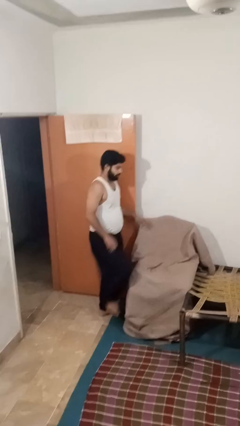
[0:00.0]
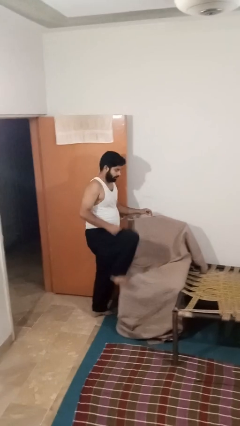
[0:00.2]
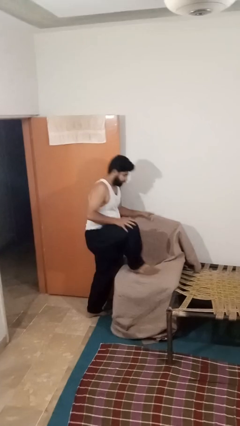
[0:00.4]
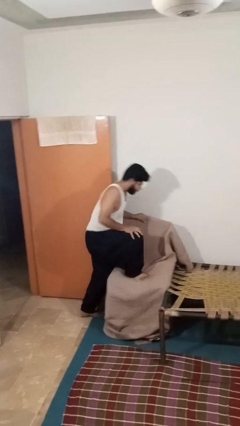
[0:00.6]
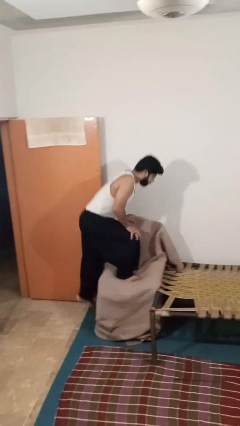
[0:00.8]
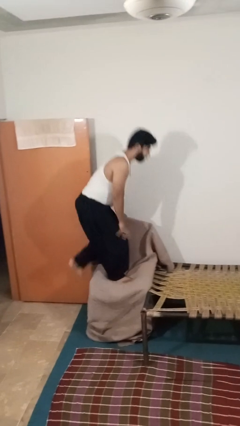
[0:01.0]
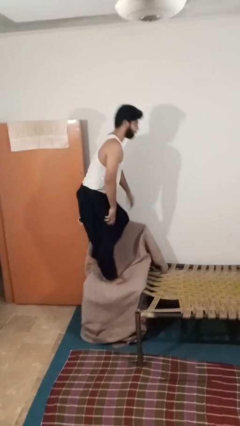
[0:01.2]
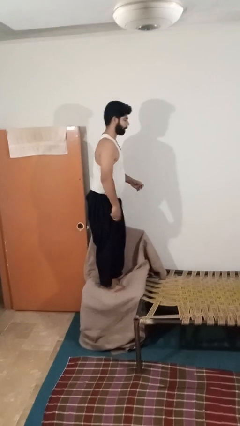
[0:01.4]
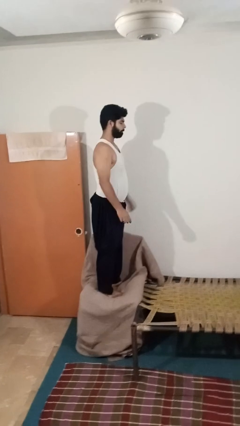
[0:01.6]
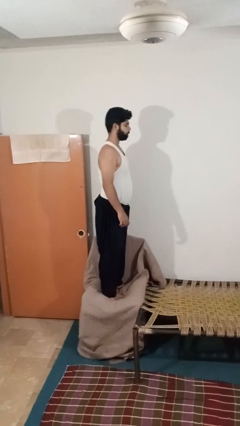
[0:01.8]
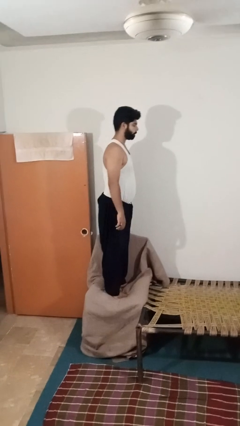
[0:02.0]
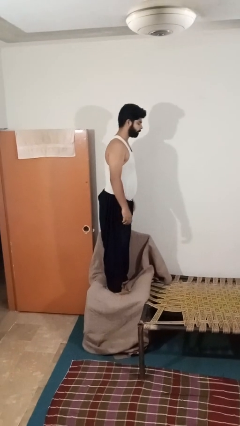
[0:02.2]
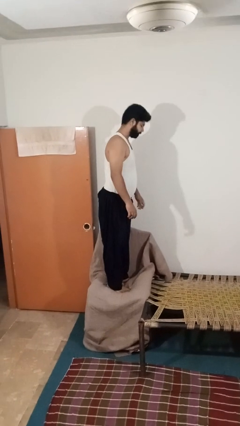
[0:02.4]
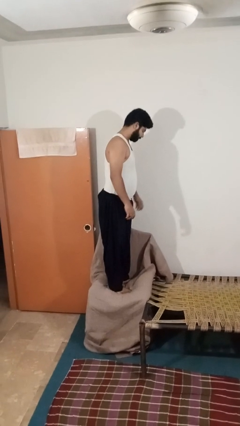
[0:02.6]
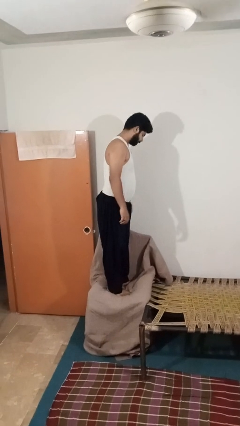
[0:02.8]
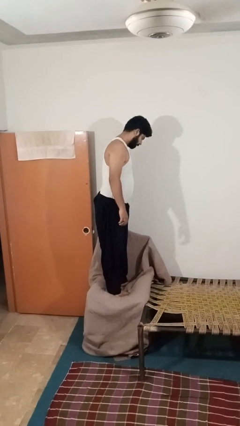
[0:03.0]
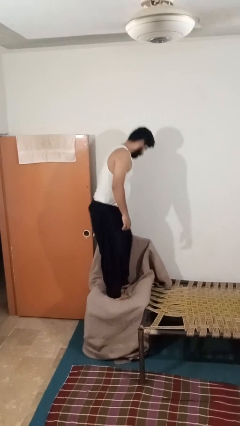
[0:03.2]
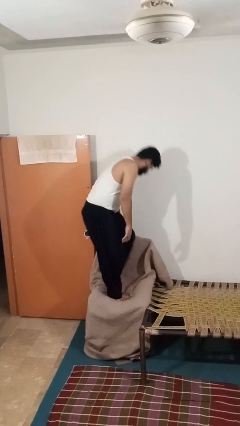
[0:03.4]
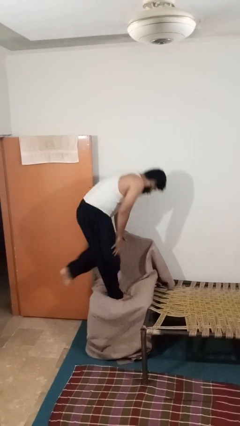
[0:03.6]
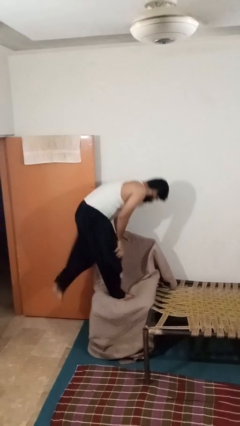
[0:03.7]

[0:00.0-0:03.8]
person climbs on couch

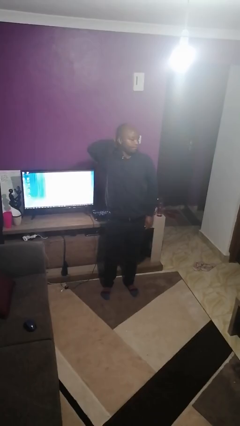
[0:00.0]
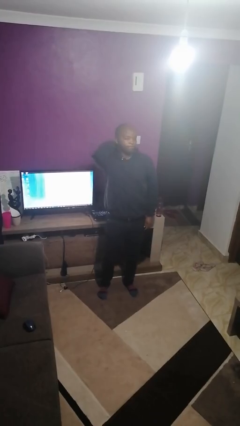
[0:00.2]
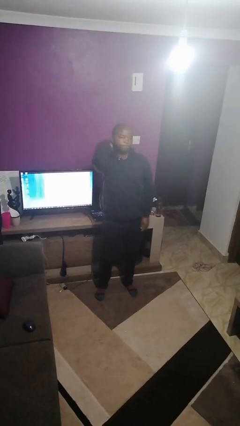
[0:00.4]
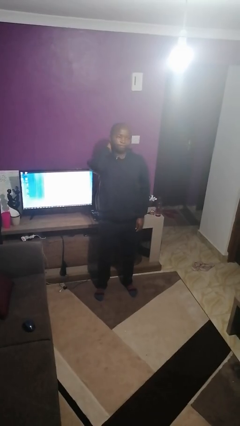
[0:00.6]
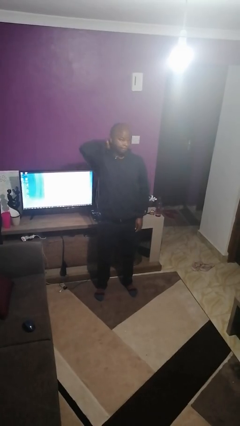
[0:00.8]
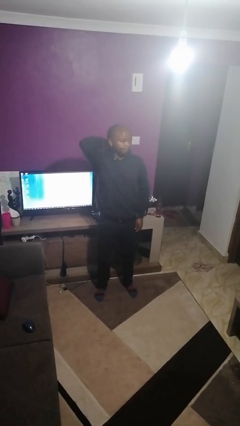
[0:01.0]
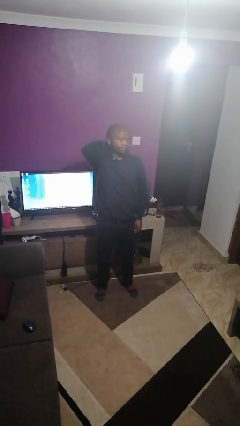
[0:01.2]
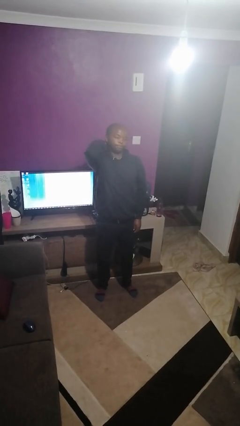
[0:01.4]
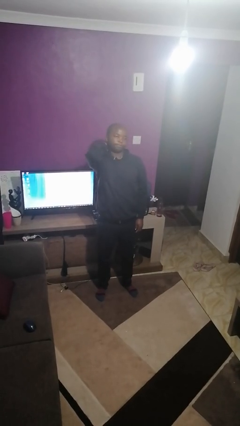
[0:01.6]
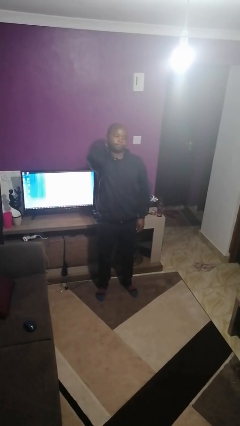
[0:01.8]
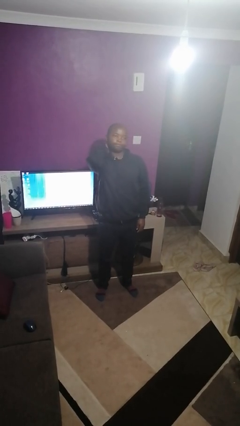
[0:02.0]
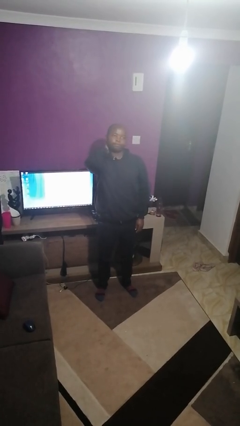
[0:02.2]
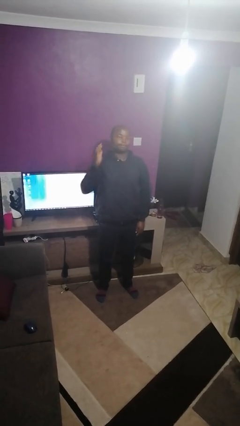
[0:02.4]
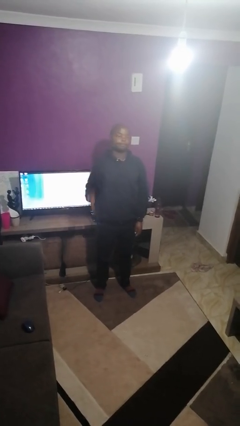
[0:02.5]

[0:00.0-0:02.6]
person rubs neck

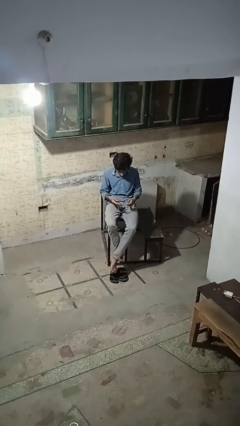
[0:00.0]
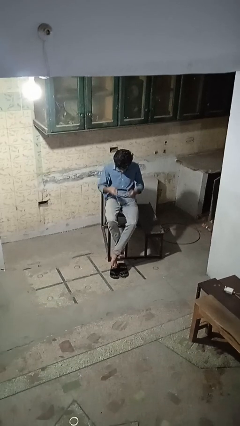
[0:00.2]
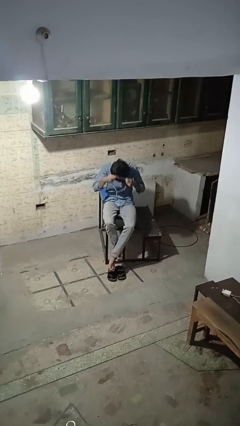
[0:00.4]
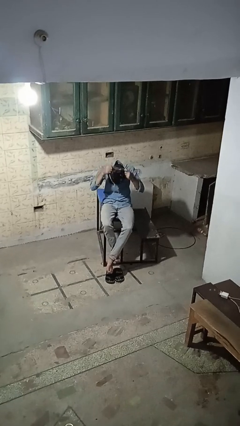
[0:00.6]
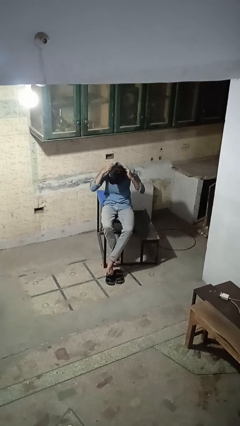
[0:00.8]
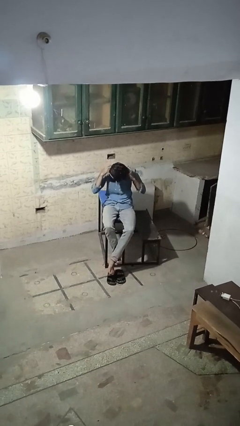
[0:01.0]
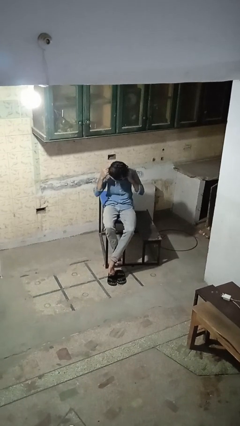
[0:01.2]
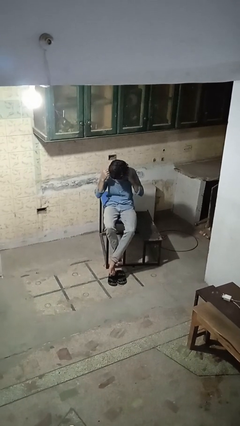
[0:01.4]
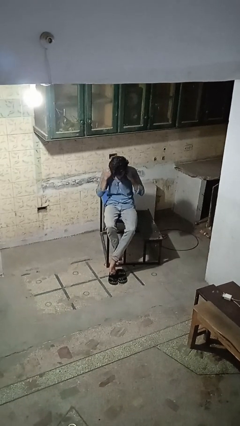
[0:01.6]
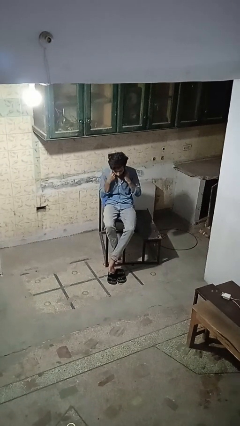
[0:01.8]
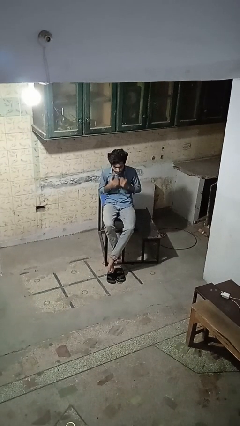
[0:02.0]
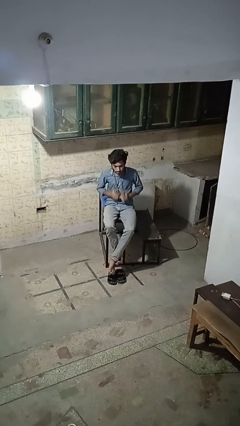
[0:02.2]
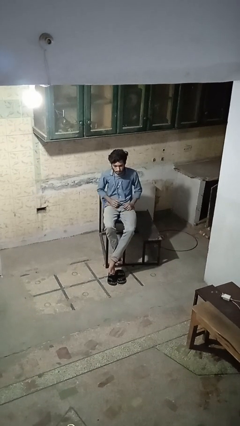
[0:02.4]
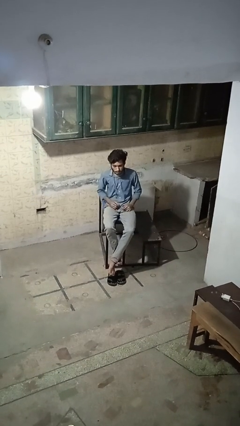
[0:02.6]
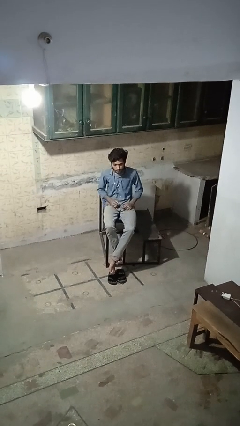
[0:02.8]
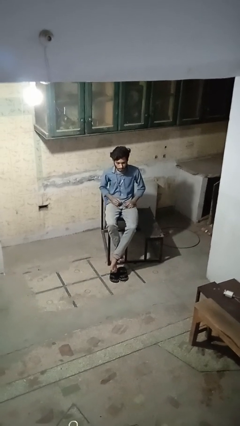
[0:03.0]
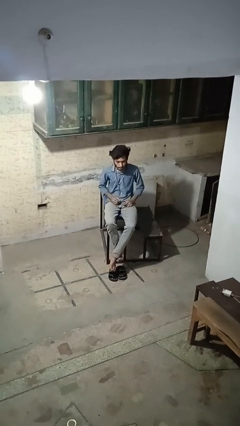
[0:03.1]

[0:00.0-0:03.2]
person puts on necklace

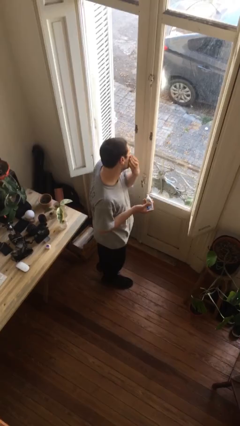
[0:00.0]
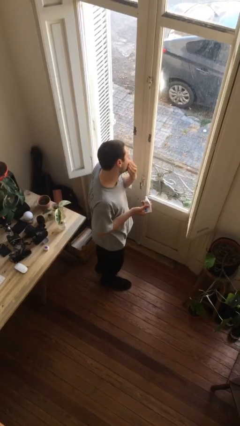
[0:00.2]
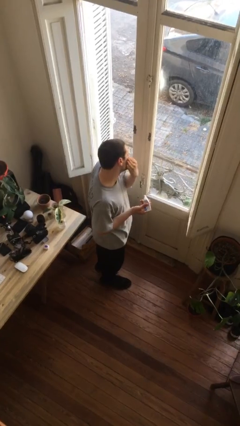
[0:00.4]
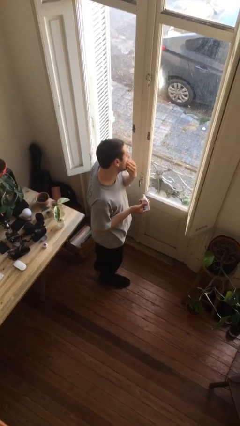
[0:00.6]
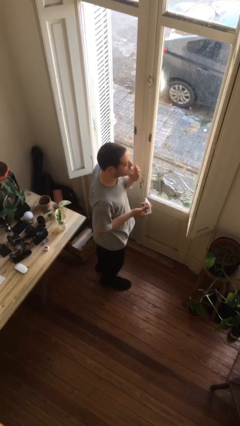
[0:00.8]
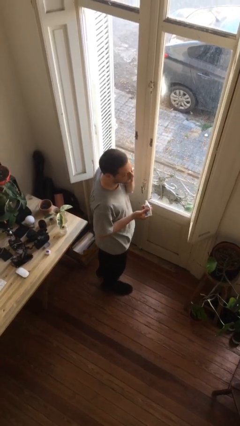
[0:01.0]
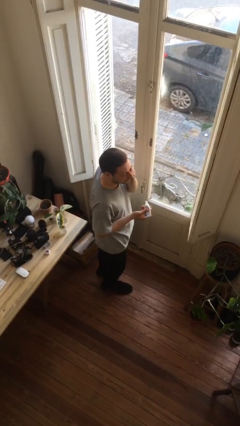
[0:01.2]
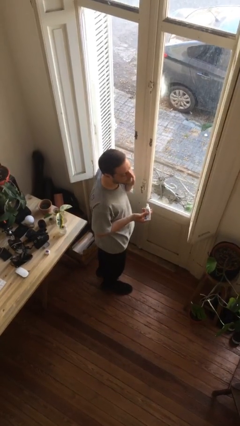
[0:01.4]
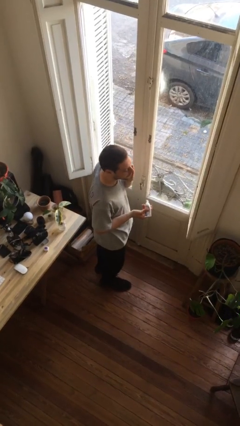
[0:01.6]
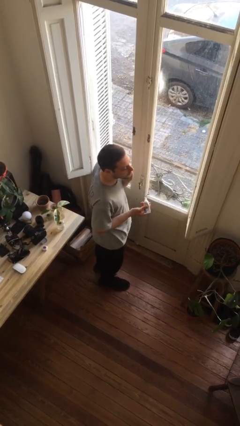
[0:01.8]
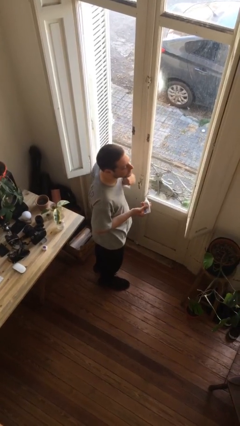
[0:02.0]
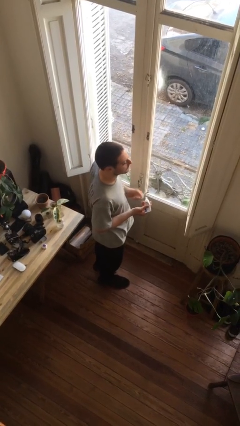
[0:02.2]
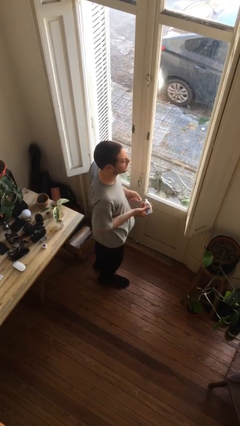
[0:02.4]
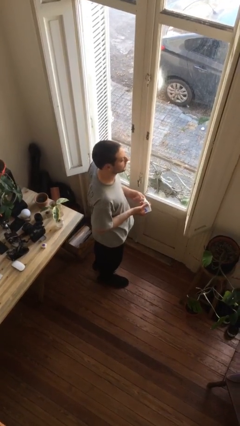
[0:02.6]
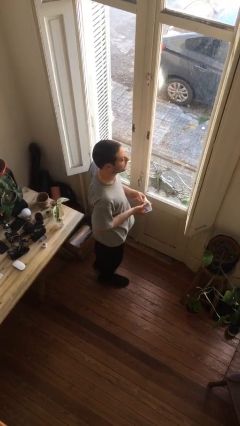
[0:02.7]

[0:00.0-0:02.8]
person applies facial moisturizer

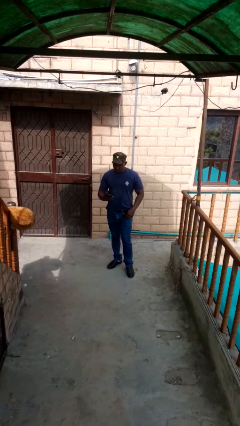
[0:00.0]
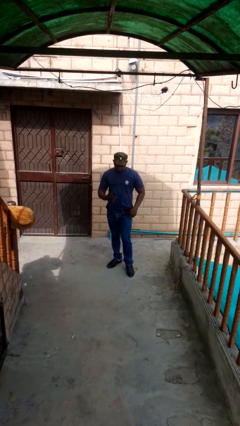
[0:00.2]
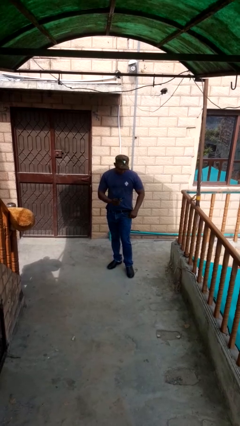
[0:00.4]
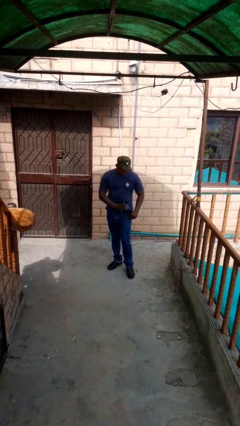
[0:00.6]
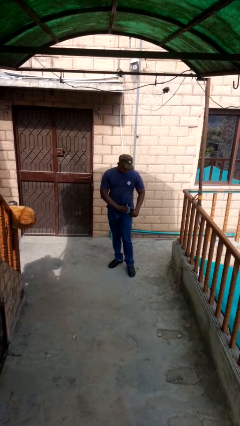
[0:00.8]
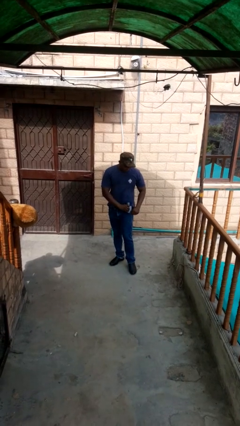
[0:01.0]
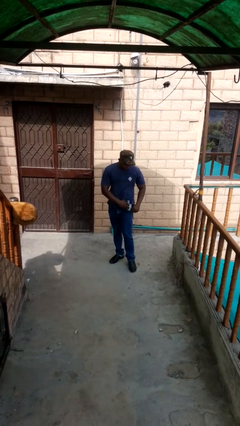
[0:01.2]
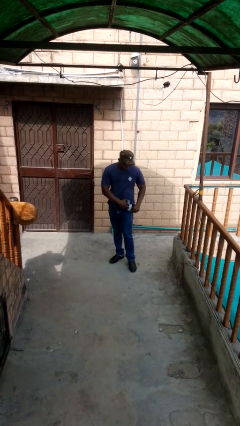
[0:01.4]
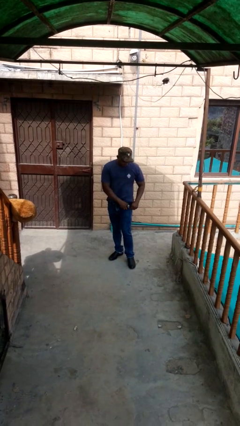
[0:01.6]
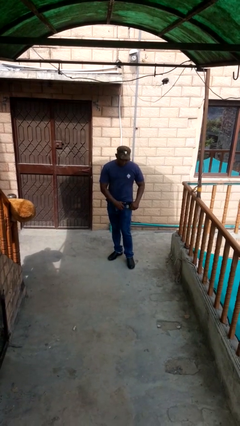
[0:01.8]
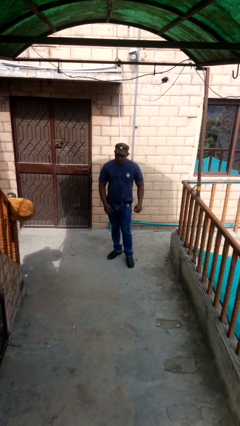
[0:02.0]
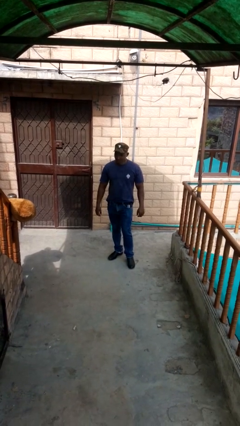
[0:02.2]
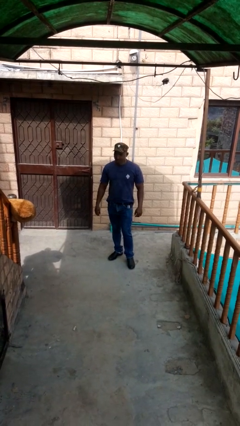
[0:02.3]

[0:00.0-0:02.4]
person puts phone into pocket

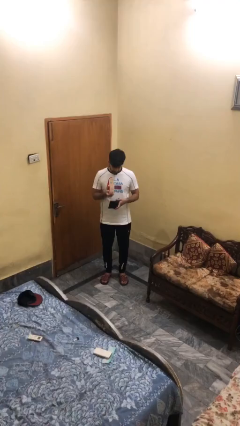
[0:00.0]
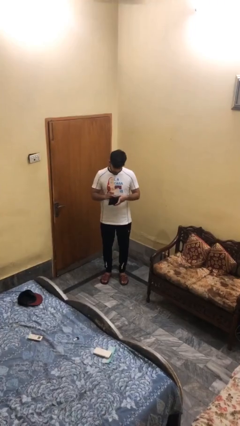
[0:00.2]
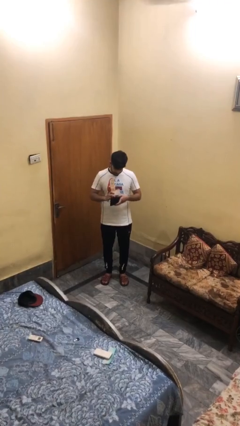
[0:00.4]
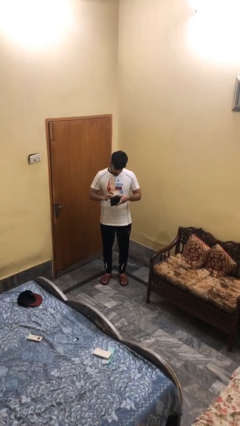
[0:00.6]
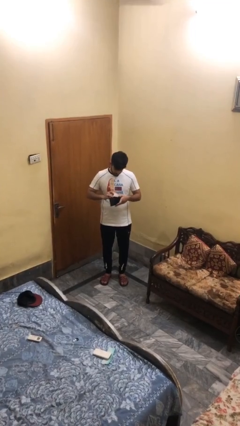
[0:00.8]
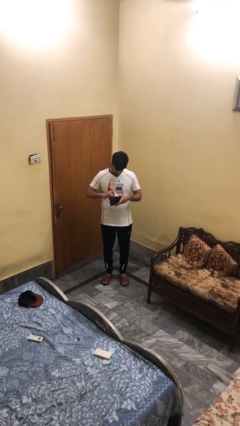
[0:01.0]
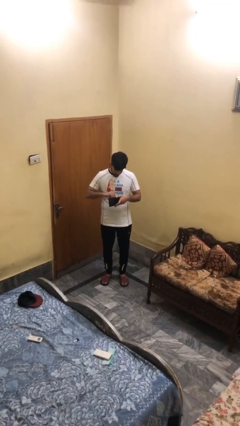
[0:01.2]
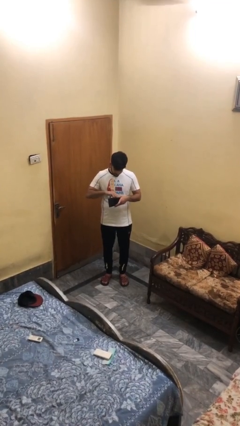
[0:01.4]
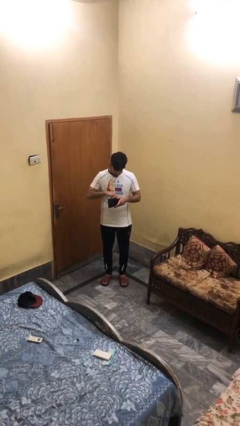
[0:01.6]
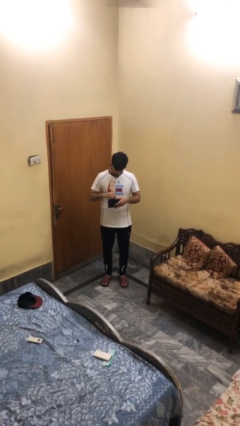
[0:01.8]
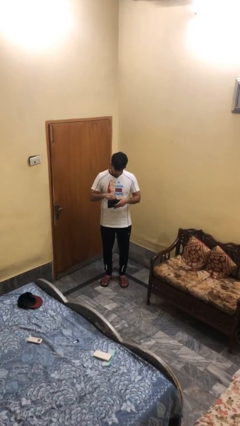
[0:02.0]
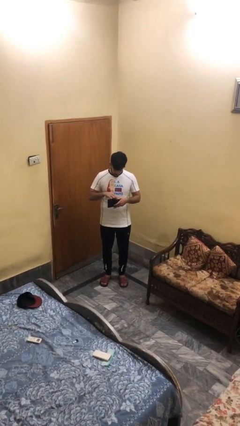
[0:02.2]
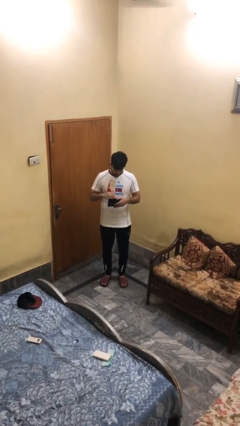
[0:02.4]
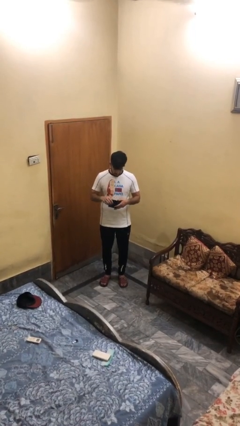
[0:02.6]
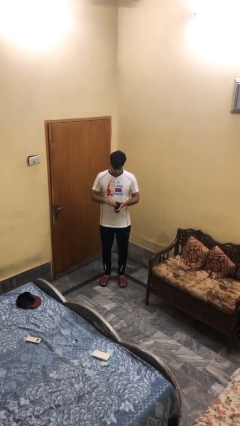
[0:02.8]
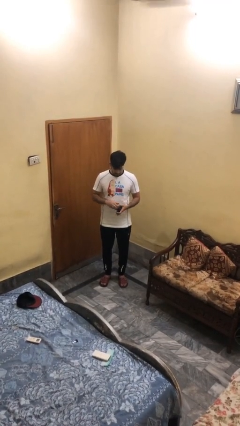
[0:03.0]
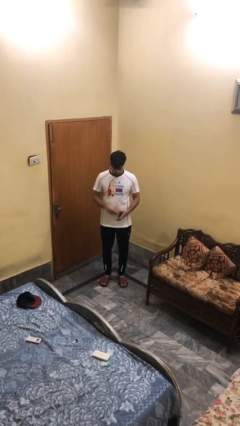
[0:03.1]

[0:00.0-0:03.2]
person puts object into purse

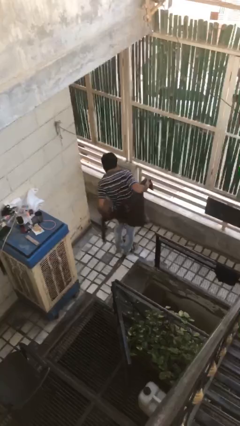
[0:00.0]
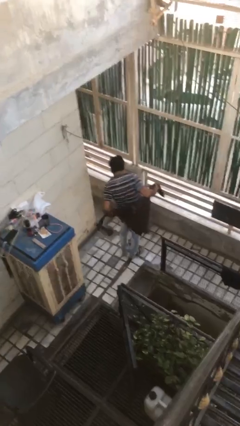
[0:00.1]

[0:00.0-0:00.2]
person ties jacket around waist
